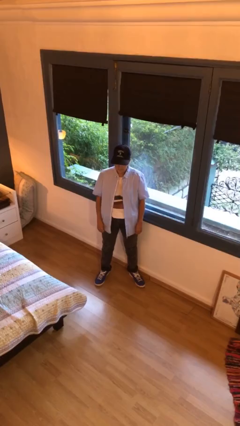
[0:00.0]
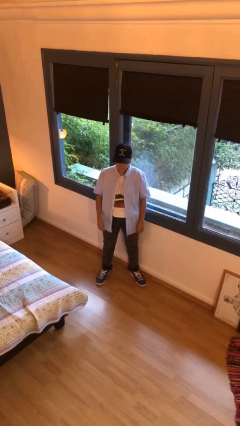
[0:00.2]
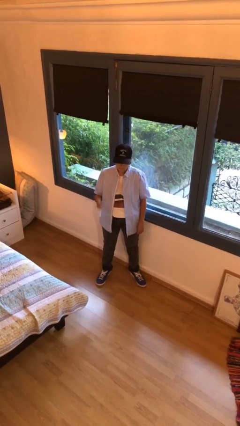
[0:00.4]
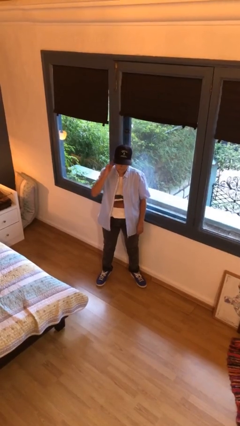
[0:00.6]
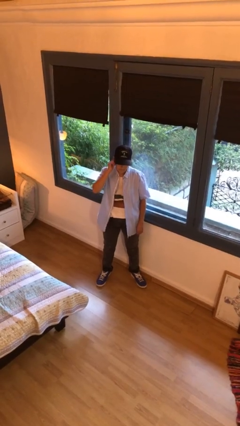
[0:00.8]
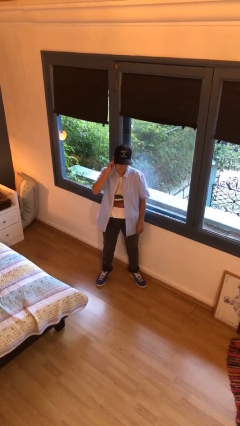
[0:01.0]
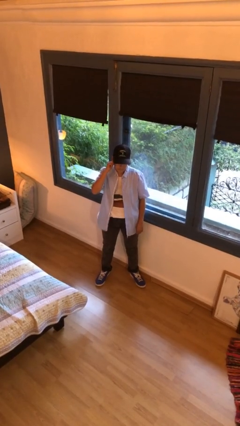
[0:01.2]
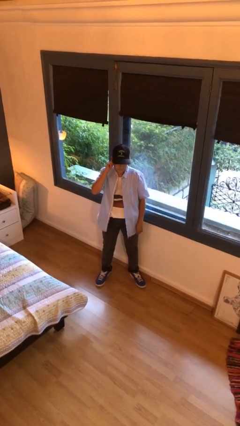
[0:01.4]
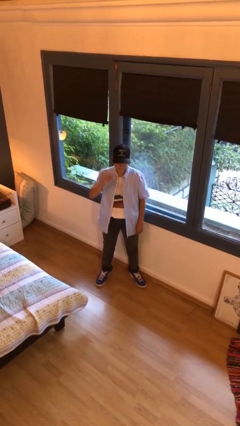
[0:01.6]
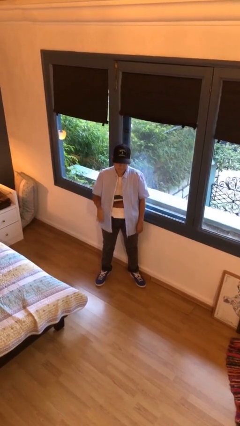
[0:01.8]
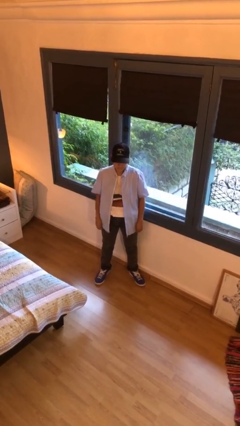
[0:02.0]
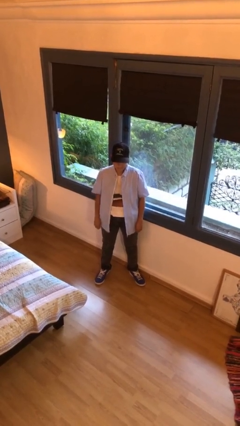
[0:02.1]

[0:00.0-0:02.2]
person touches earlobe

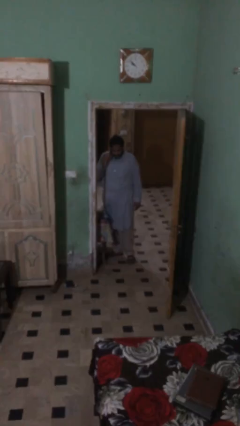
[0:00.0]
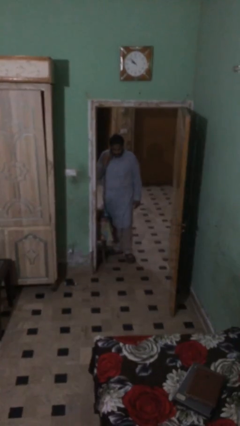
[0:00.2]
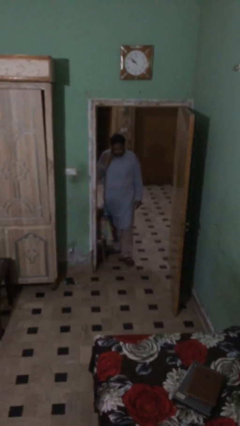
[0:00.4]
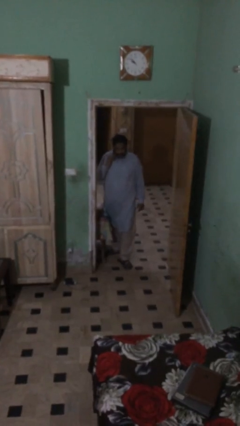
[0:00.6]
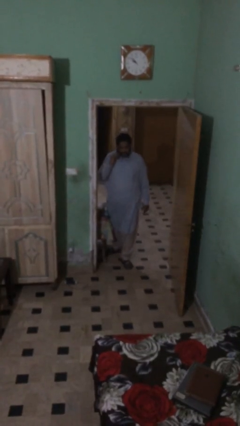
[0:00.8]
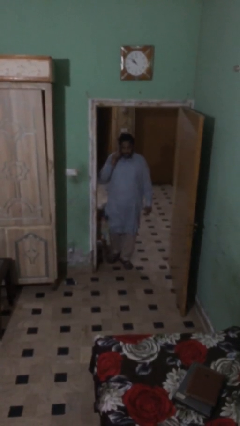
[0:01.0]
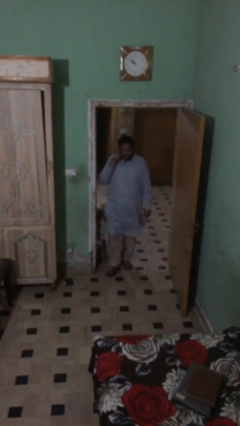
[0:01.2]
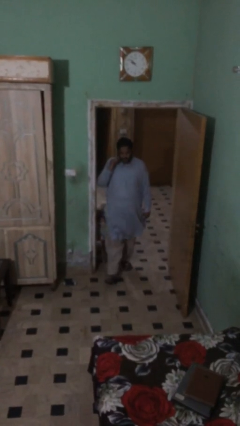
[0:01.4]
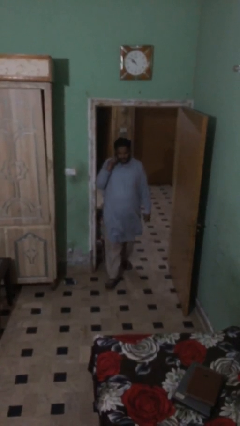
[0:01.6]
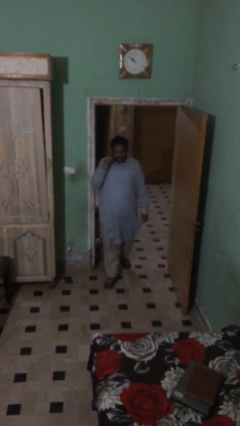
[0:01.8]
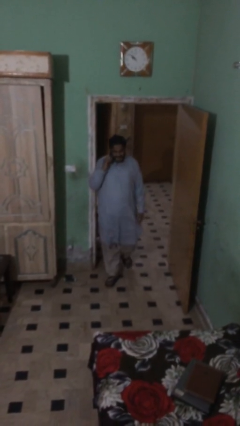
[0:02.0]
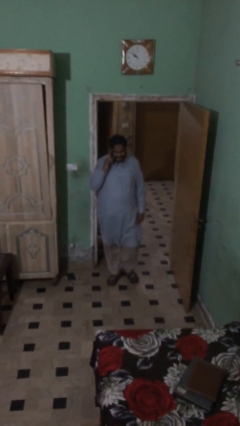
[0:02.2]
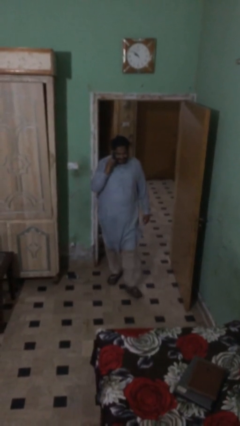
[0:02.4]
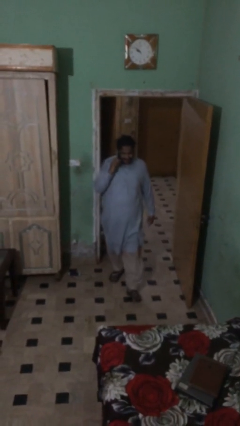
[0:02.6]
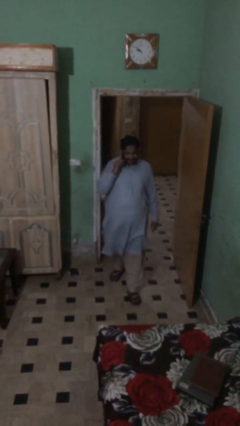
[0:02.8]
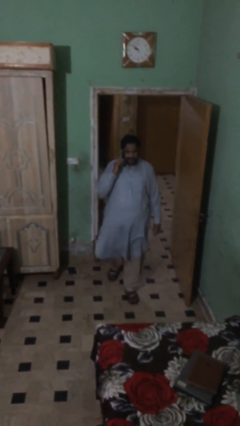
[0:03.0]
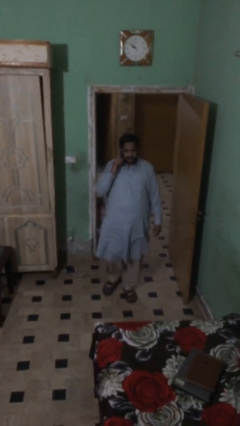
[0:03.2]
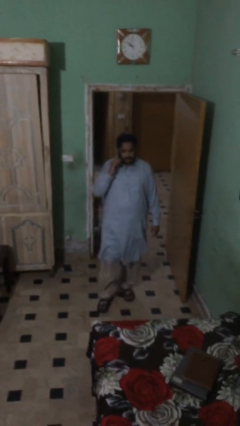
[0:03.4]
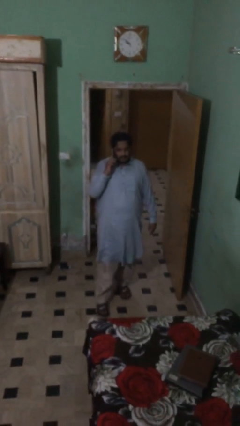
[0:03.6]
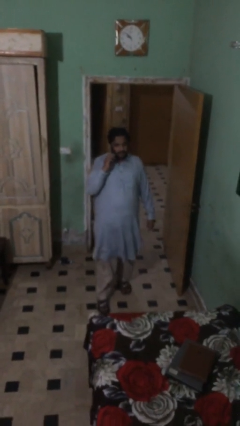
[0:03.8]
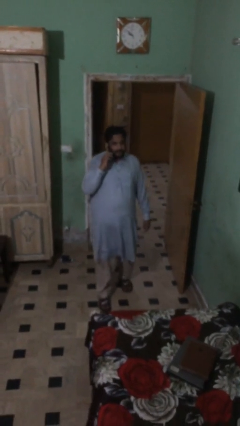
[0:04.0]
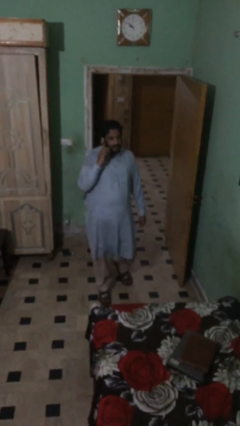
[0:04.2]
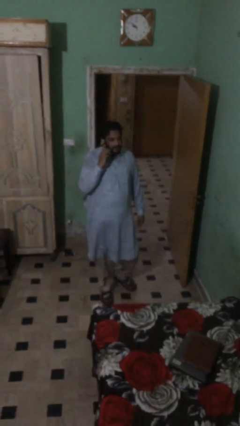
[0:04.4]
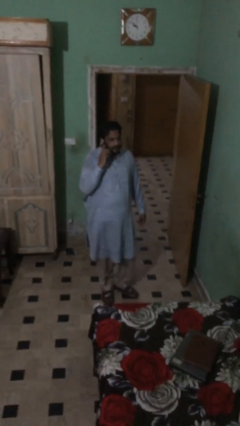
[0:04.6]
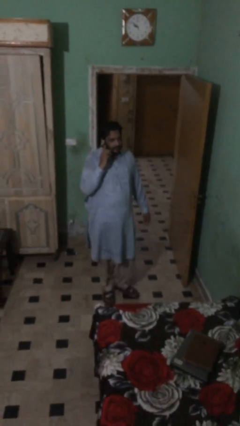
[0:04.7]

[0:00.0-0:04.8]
person enters scene through structure

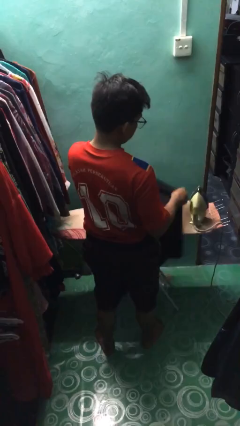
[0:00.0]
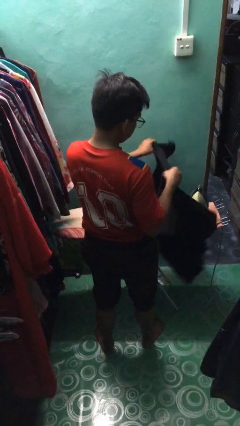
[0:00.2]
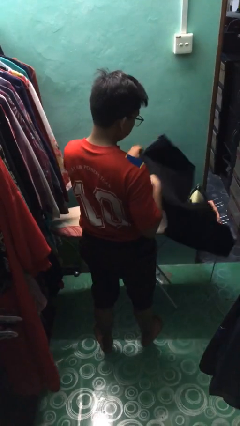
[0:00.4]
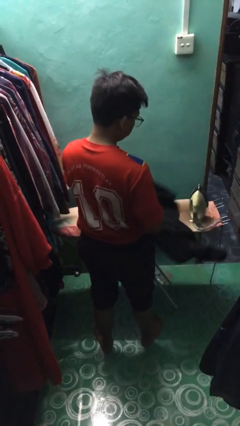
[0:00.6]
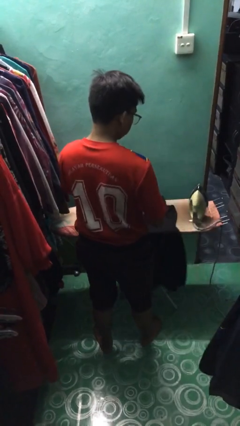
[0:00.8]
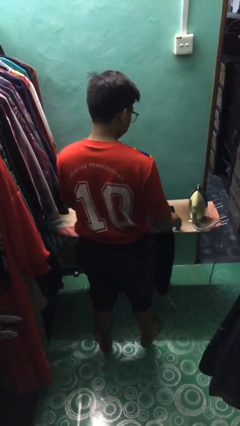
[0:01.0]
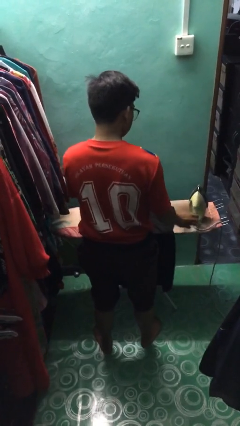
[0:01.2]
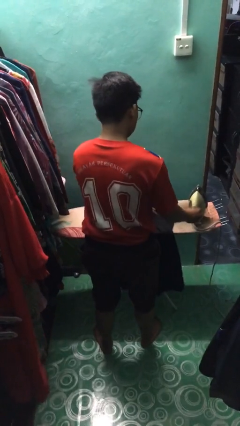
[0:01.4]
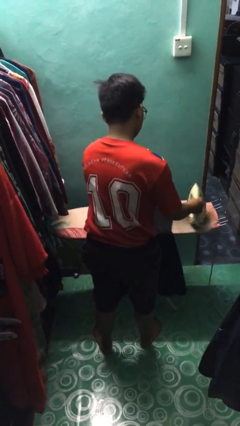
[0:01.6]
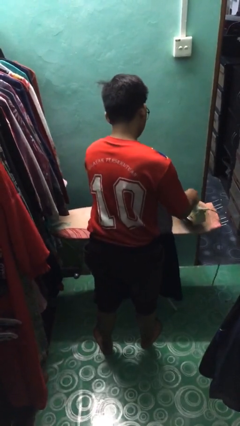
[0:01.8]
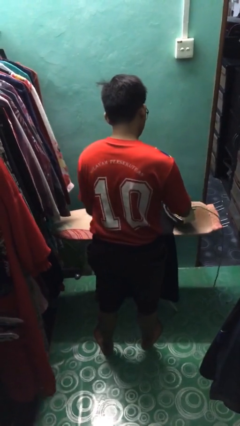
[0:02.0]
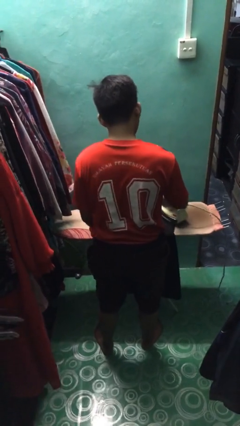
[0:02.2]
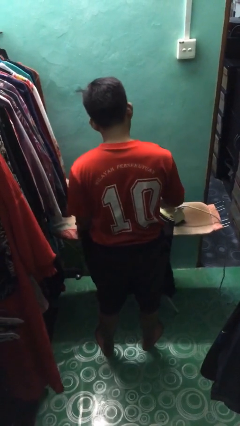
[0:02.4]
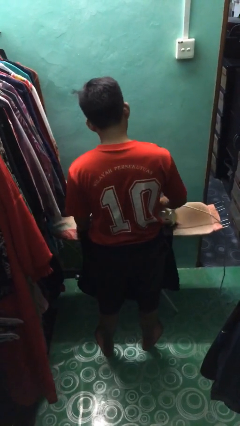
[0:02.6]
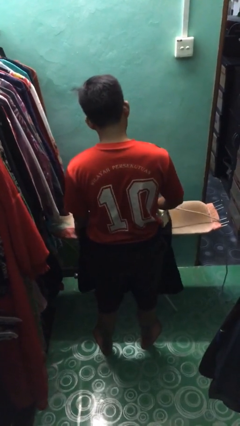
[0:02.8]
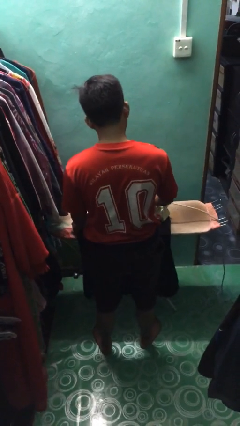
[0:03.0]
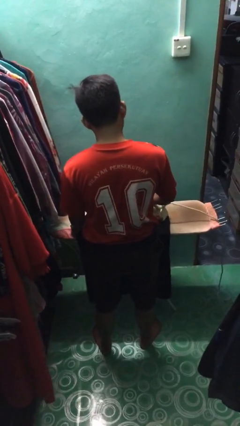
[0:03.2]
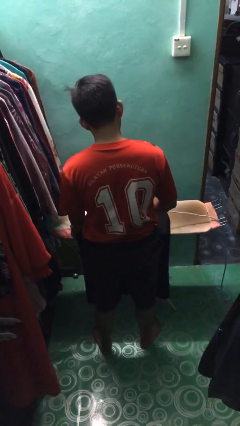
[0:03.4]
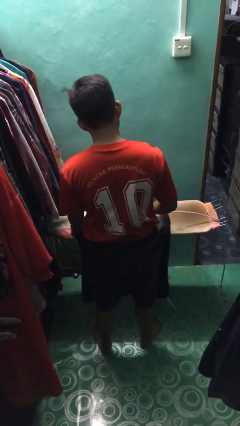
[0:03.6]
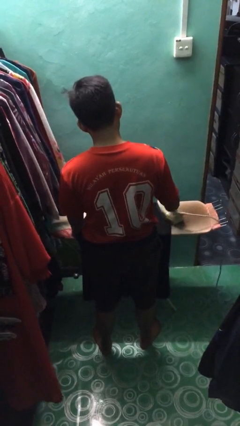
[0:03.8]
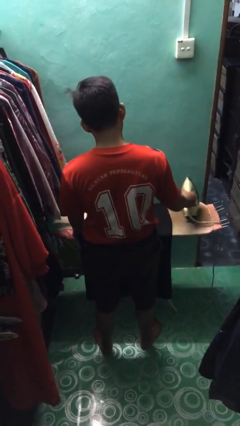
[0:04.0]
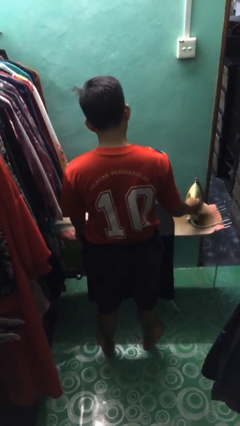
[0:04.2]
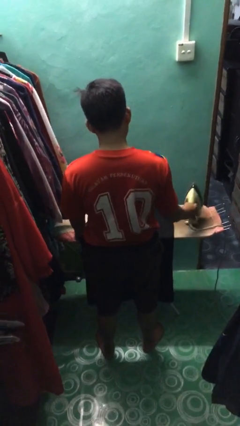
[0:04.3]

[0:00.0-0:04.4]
person irons clothes

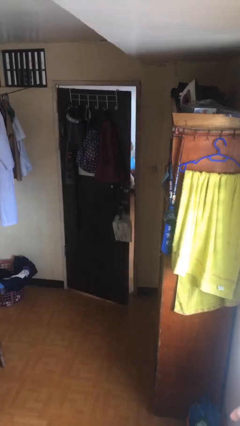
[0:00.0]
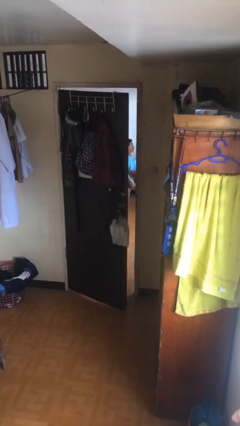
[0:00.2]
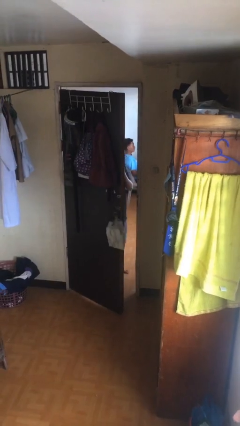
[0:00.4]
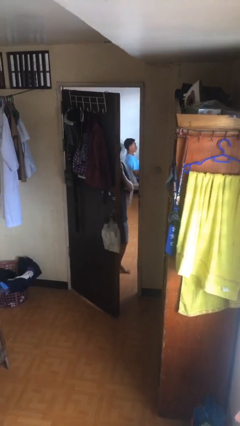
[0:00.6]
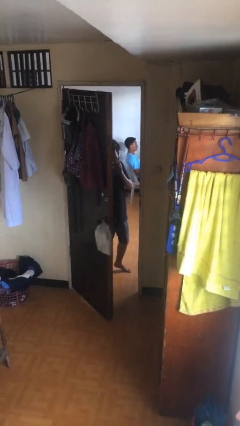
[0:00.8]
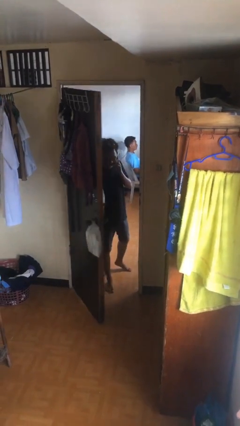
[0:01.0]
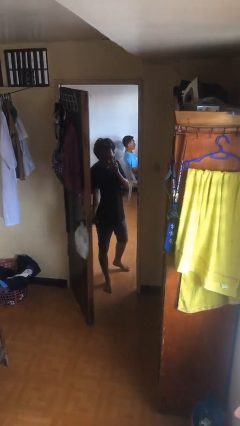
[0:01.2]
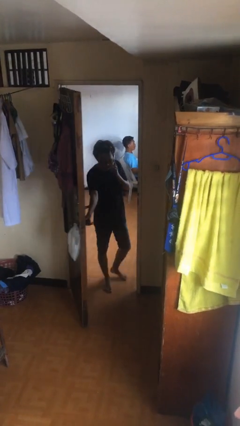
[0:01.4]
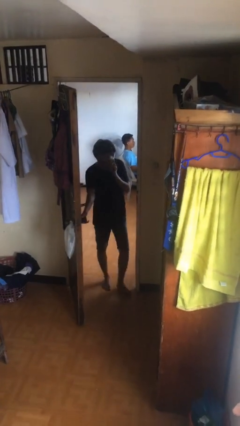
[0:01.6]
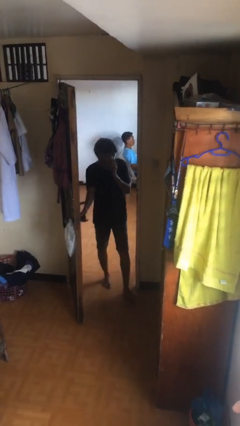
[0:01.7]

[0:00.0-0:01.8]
person opens facility door

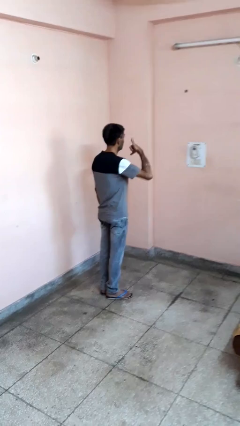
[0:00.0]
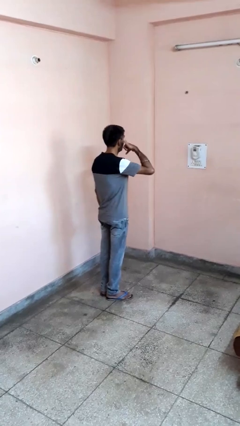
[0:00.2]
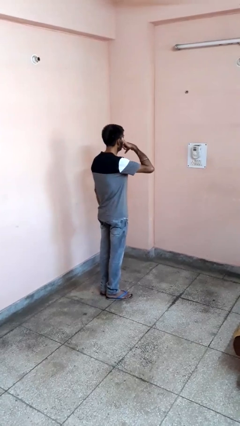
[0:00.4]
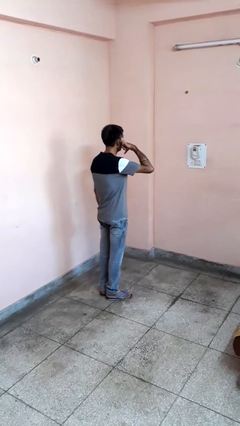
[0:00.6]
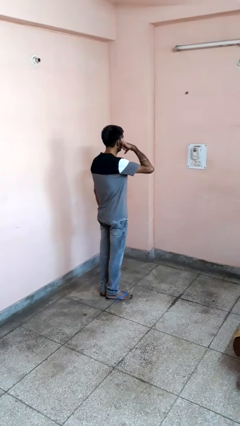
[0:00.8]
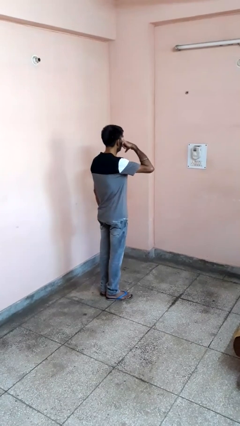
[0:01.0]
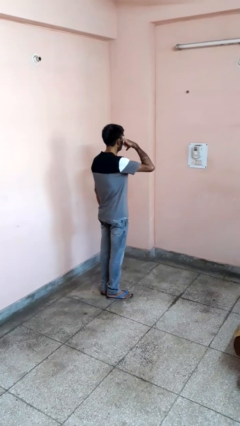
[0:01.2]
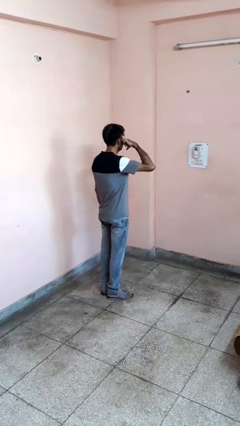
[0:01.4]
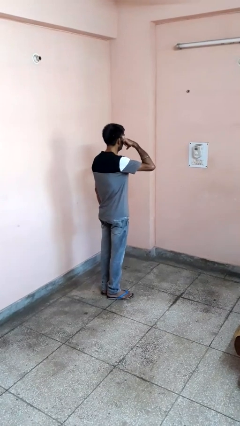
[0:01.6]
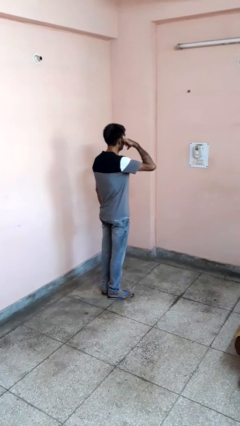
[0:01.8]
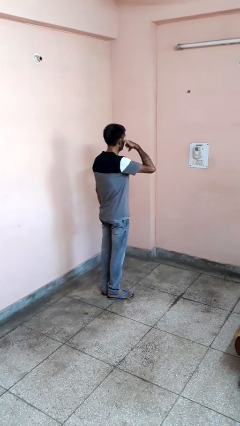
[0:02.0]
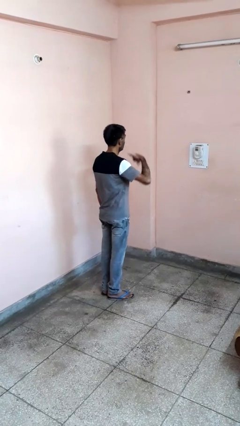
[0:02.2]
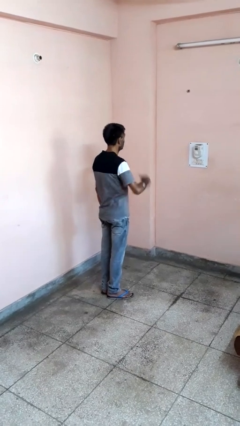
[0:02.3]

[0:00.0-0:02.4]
person gestures call me

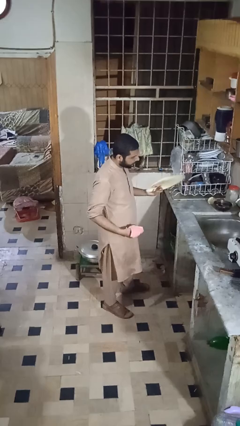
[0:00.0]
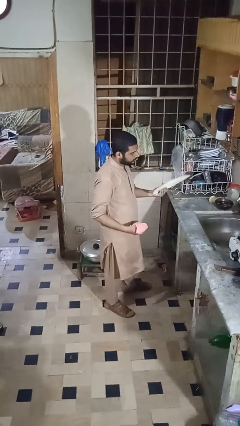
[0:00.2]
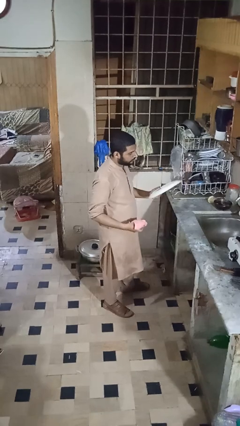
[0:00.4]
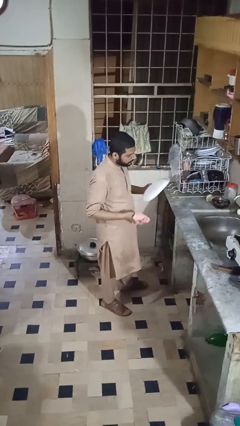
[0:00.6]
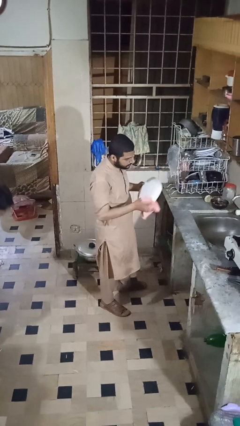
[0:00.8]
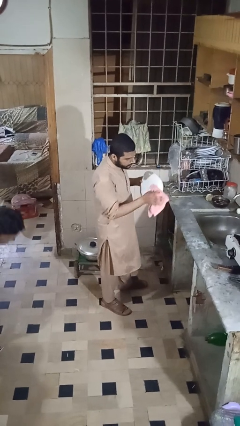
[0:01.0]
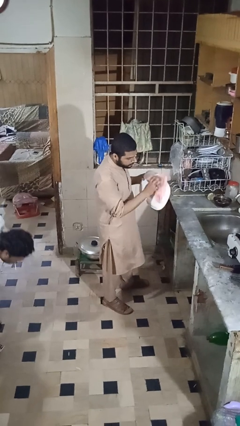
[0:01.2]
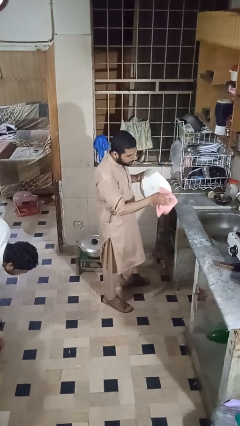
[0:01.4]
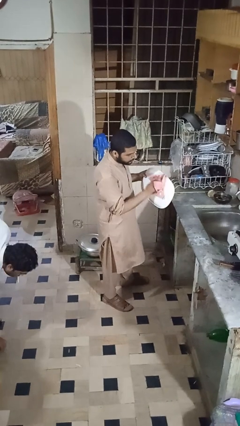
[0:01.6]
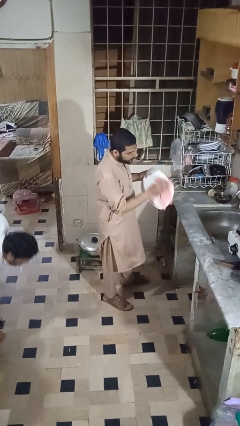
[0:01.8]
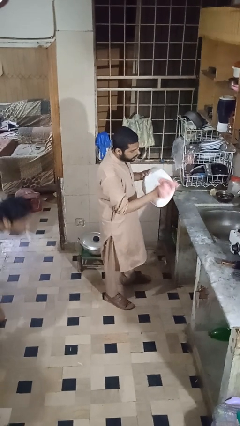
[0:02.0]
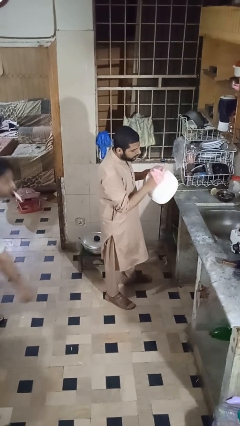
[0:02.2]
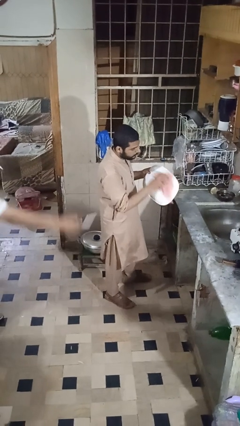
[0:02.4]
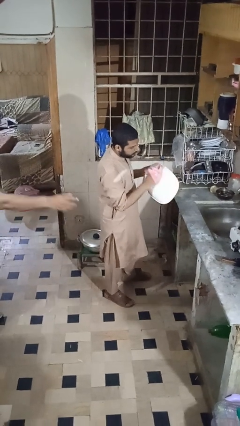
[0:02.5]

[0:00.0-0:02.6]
person dries dish
